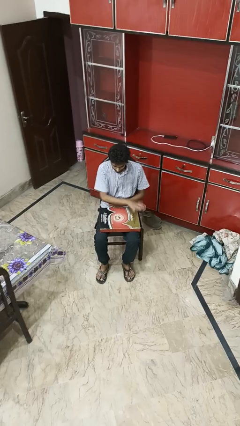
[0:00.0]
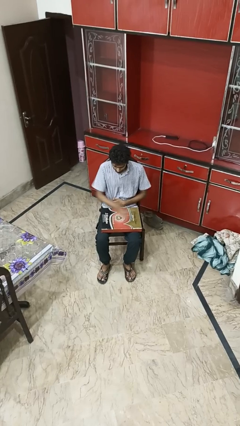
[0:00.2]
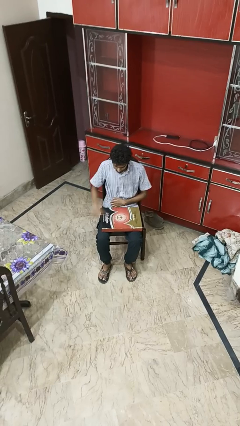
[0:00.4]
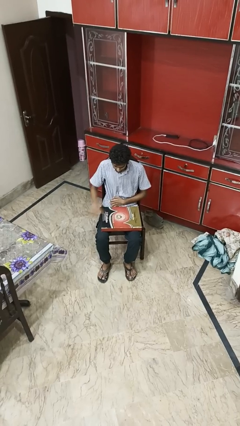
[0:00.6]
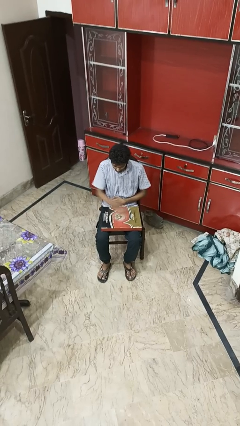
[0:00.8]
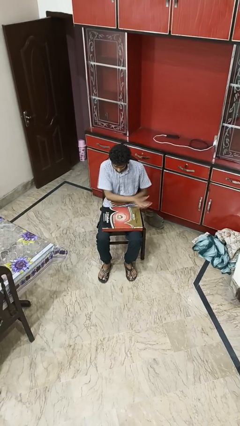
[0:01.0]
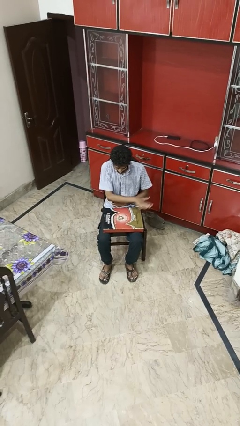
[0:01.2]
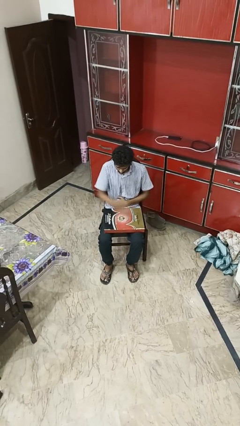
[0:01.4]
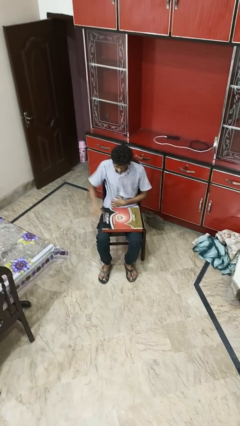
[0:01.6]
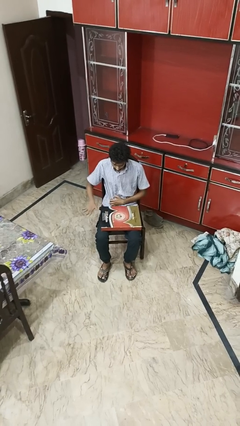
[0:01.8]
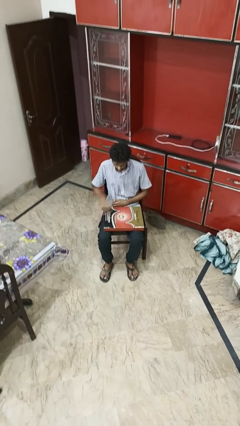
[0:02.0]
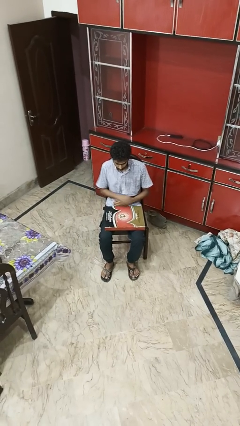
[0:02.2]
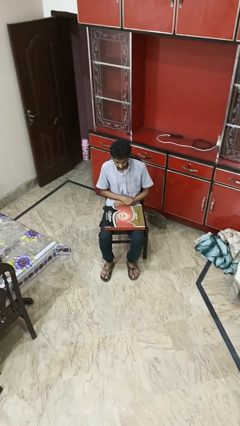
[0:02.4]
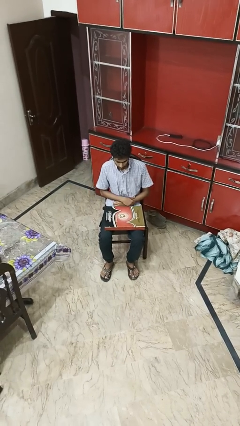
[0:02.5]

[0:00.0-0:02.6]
person waves hand over object

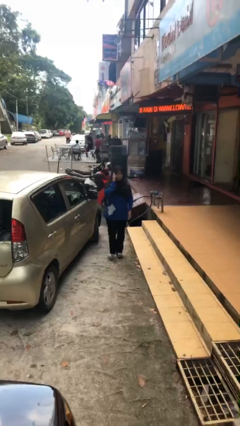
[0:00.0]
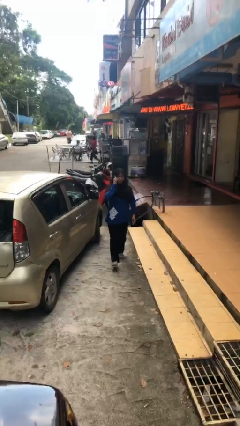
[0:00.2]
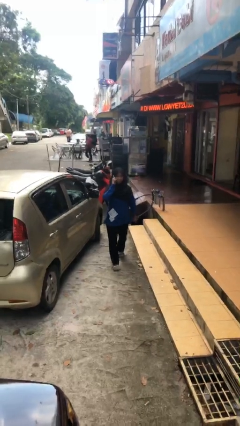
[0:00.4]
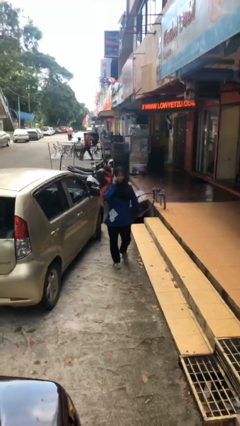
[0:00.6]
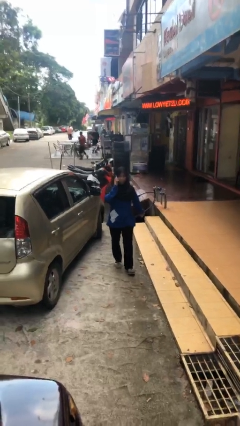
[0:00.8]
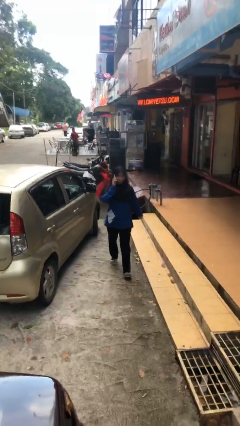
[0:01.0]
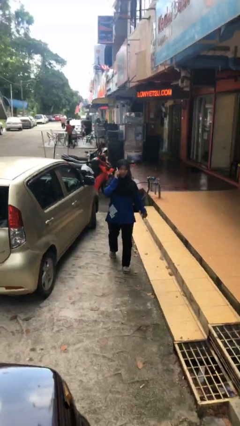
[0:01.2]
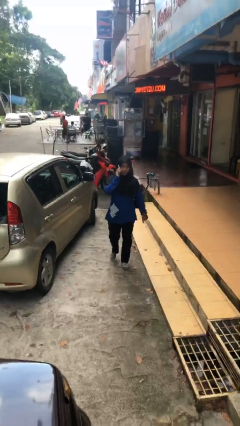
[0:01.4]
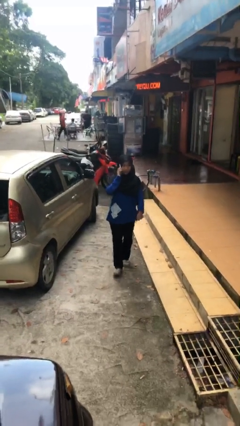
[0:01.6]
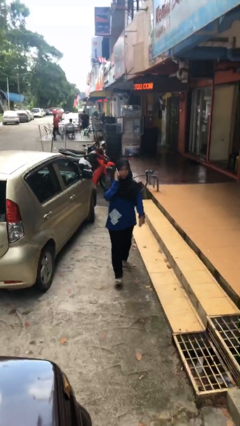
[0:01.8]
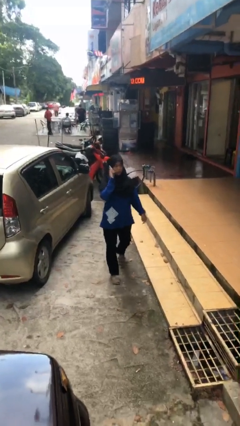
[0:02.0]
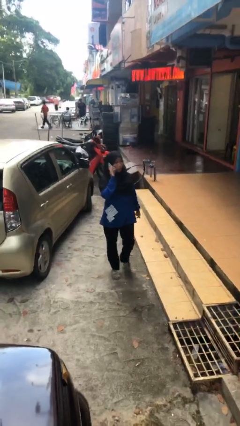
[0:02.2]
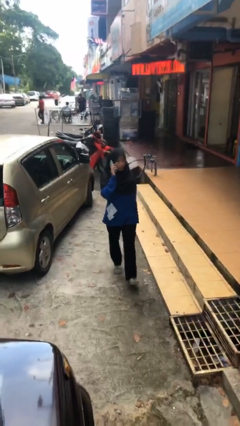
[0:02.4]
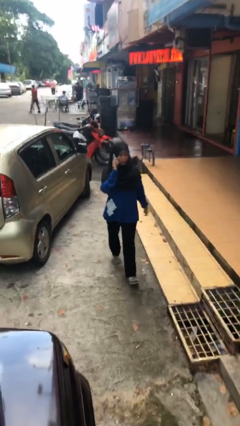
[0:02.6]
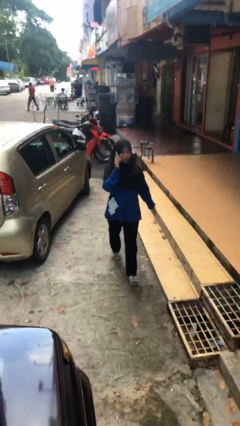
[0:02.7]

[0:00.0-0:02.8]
person talks on phone

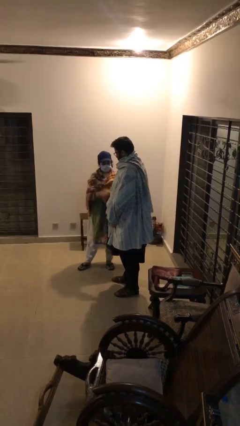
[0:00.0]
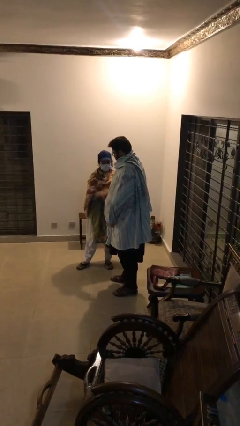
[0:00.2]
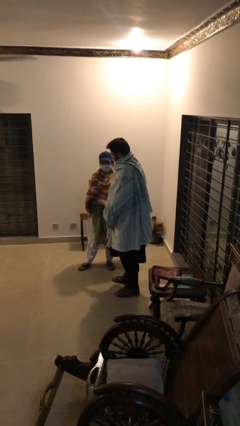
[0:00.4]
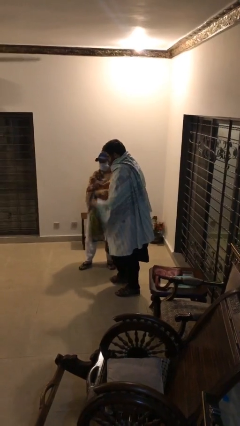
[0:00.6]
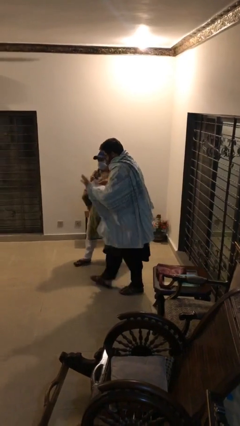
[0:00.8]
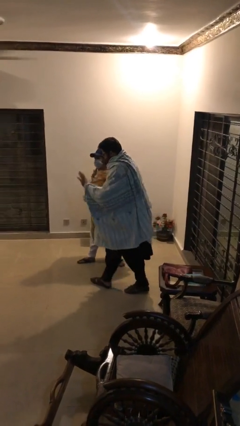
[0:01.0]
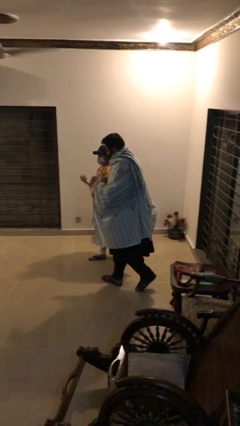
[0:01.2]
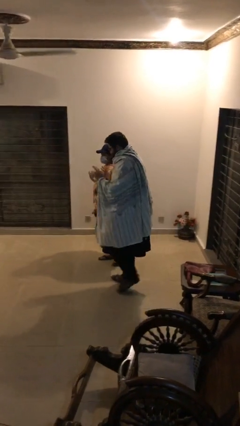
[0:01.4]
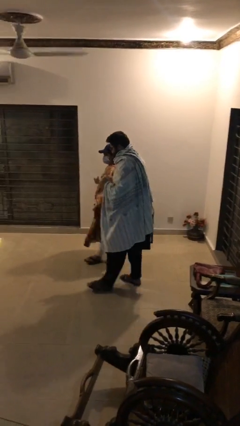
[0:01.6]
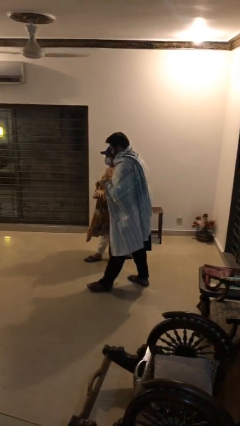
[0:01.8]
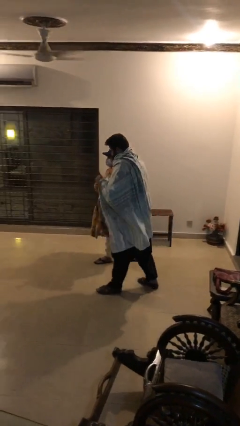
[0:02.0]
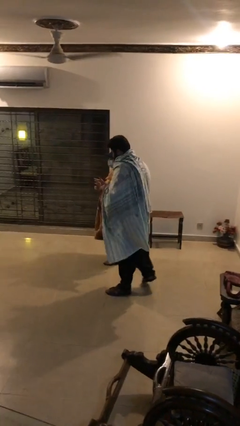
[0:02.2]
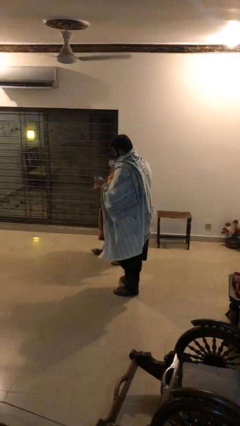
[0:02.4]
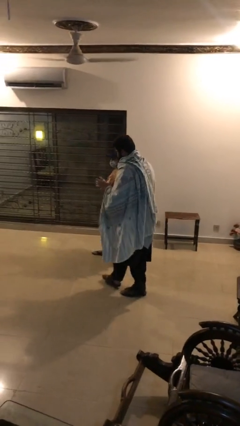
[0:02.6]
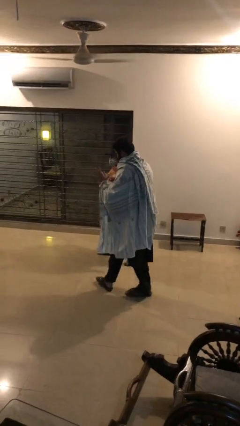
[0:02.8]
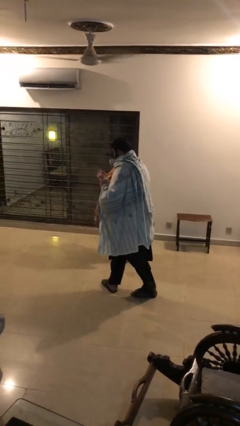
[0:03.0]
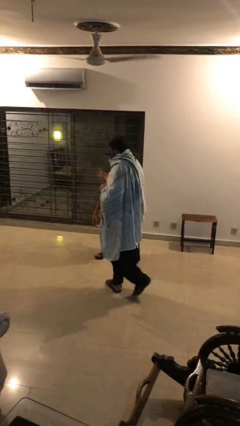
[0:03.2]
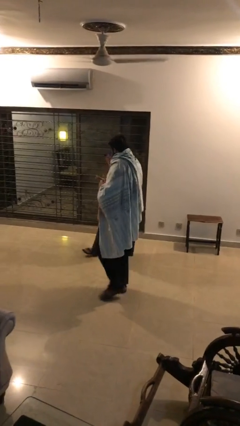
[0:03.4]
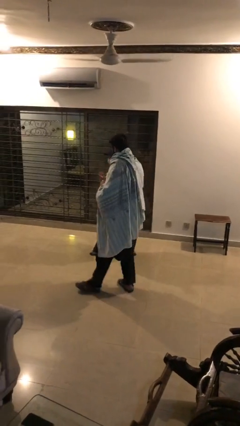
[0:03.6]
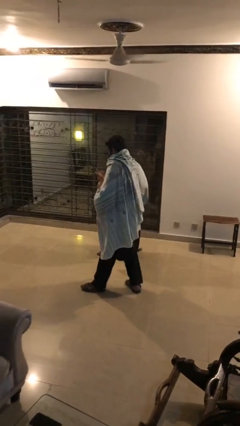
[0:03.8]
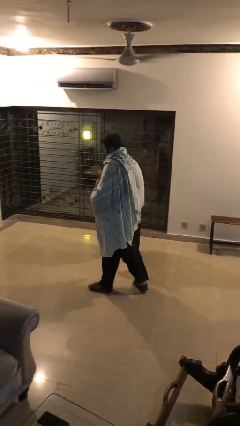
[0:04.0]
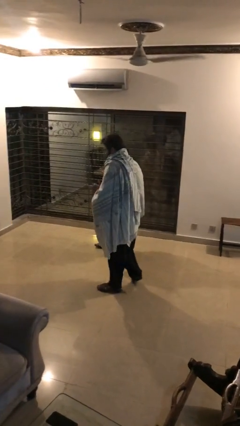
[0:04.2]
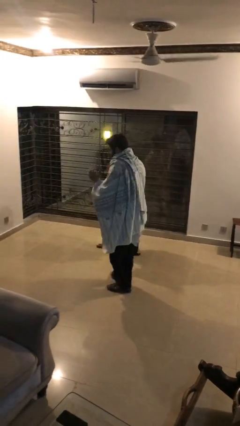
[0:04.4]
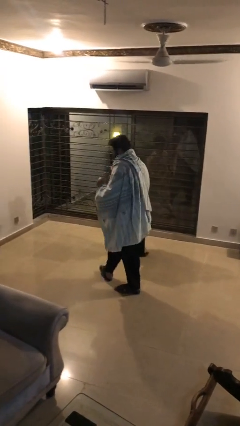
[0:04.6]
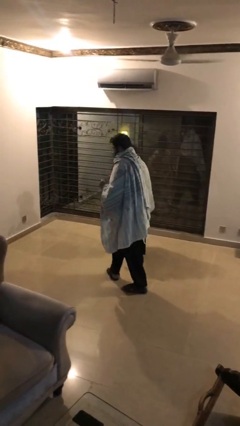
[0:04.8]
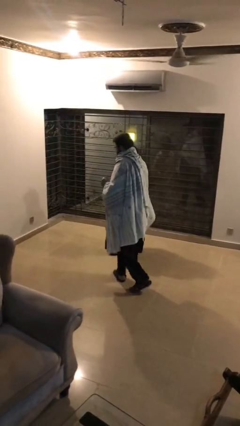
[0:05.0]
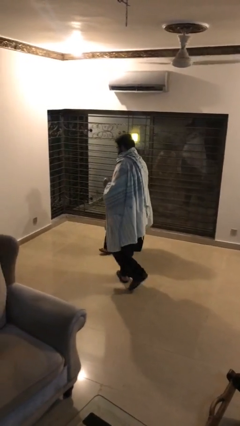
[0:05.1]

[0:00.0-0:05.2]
person talks to person

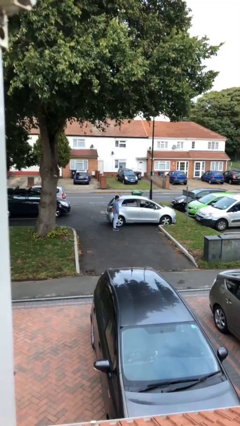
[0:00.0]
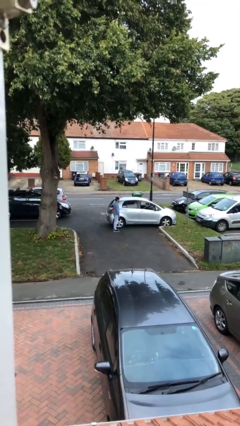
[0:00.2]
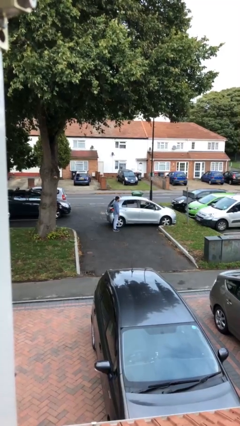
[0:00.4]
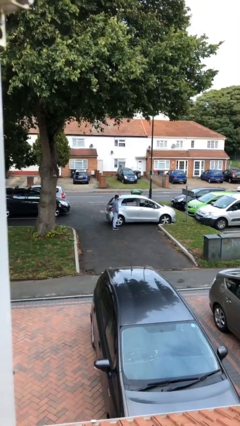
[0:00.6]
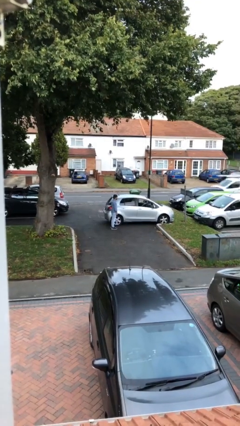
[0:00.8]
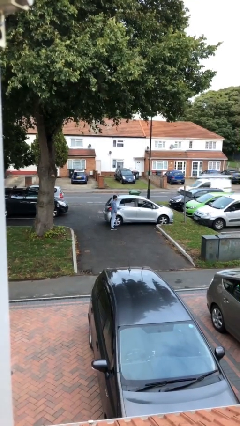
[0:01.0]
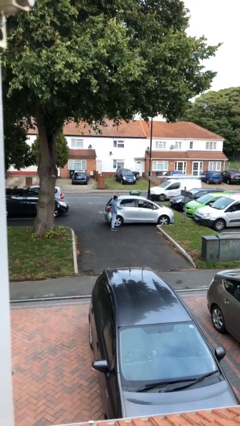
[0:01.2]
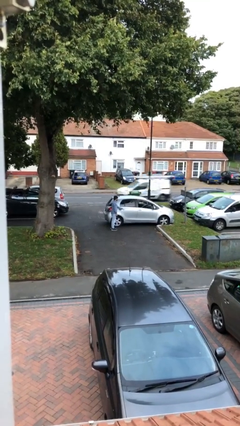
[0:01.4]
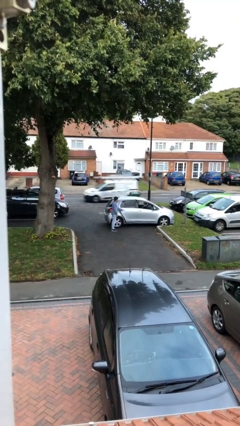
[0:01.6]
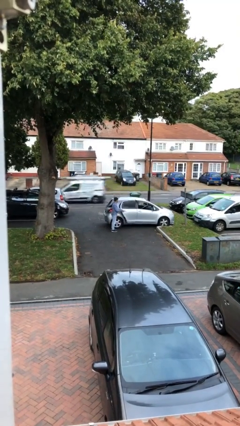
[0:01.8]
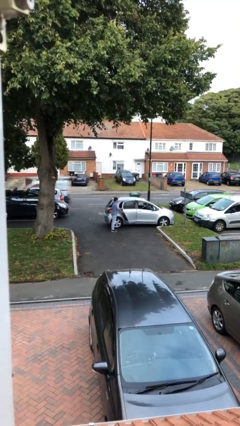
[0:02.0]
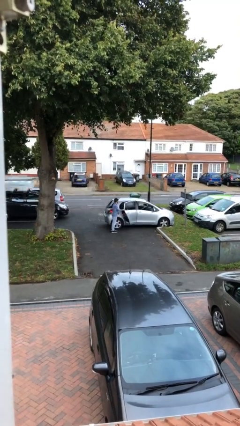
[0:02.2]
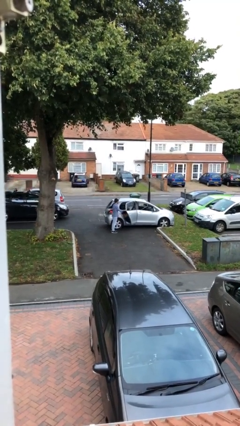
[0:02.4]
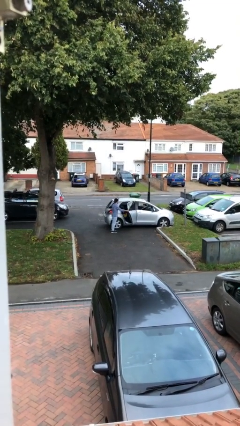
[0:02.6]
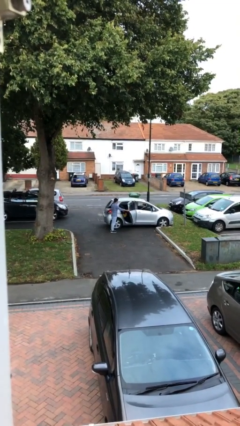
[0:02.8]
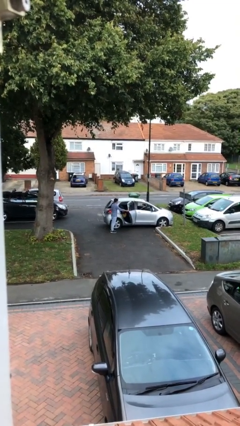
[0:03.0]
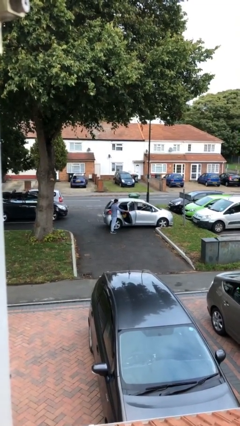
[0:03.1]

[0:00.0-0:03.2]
person opens car door

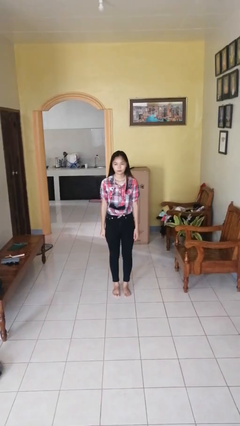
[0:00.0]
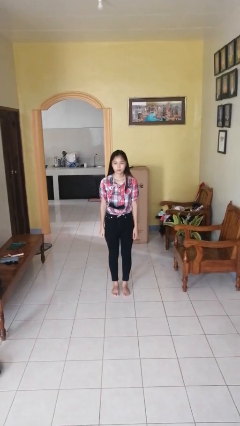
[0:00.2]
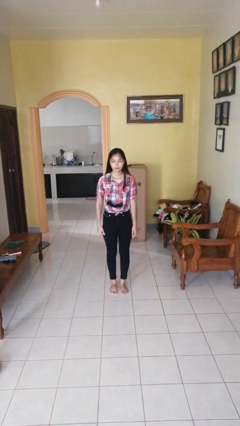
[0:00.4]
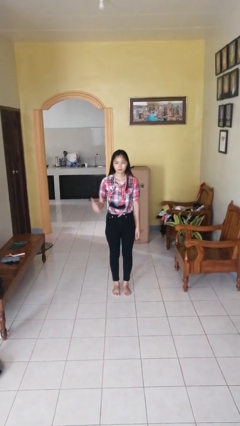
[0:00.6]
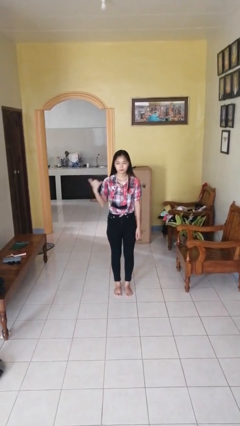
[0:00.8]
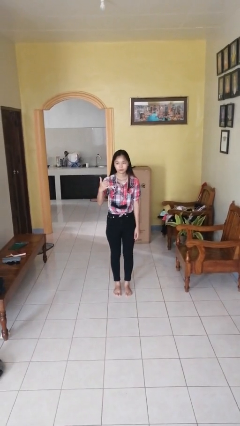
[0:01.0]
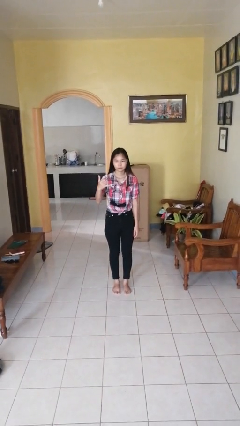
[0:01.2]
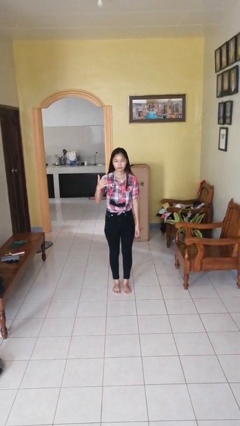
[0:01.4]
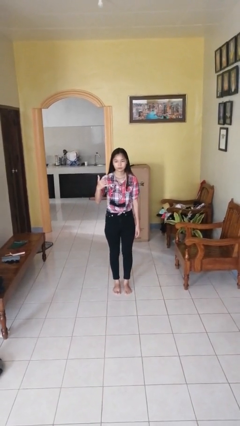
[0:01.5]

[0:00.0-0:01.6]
person gestures hang loose

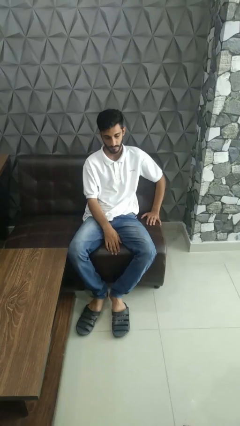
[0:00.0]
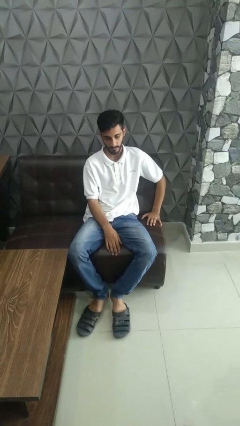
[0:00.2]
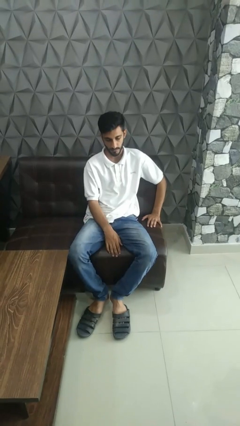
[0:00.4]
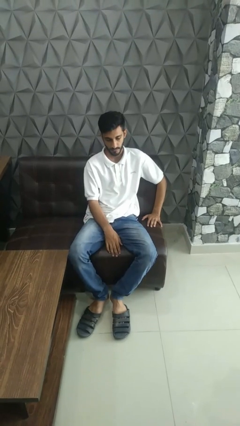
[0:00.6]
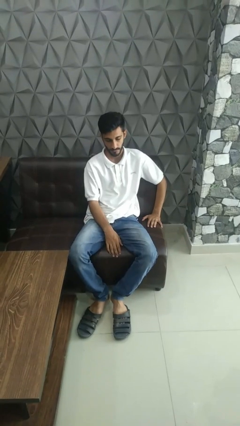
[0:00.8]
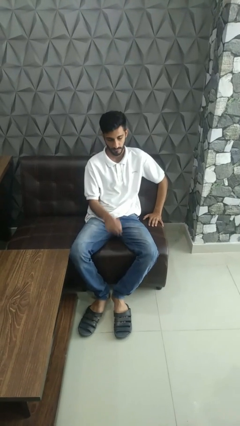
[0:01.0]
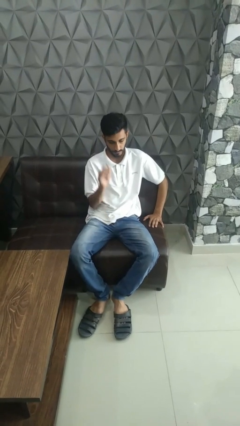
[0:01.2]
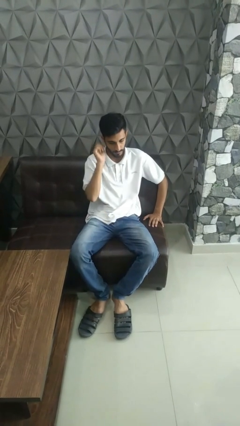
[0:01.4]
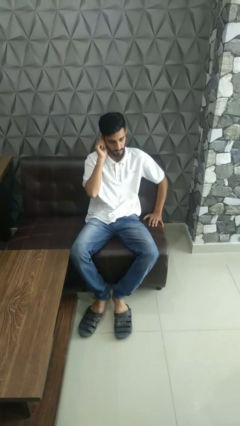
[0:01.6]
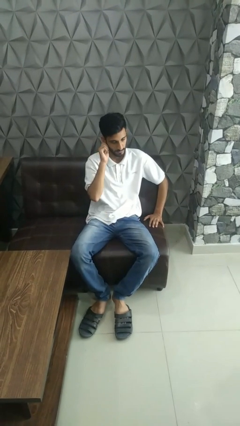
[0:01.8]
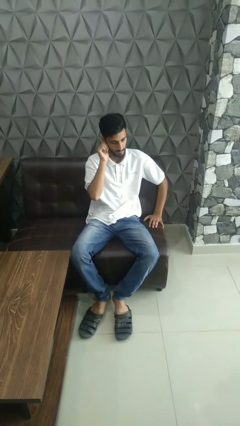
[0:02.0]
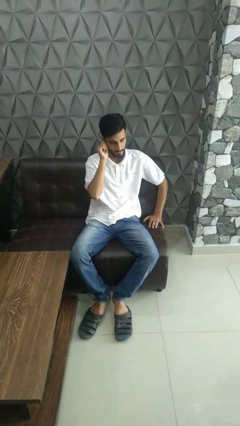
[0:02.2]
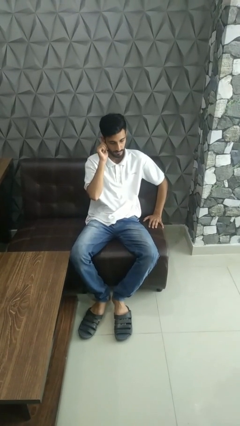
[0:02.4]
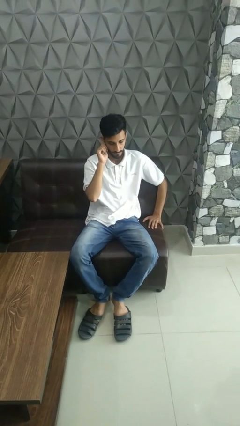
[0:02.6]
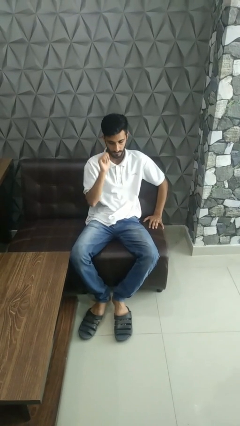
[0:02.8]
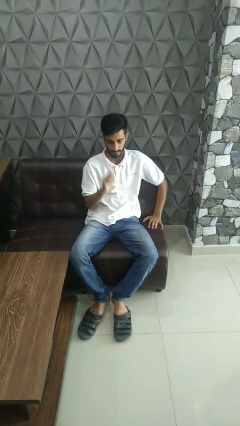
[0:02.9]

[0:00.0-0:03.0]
person touches earlobe
